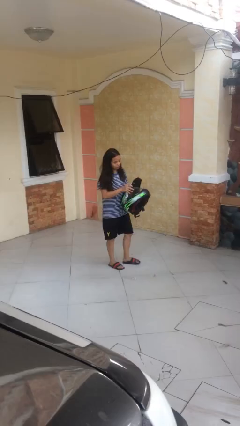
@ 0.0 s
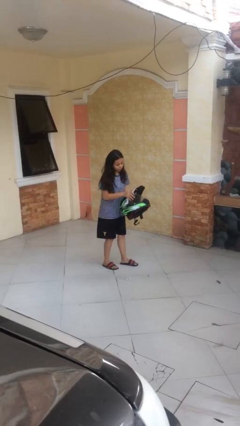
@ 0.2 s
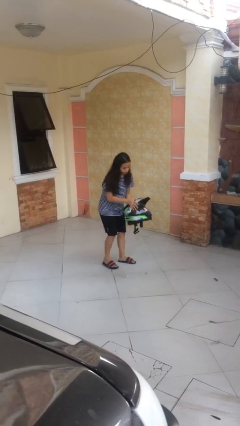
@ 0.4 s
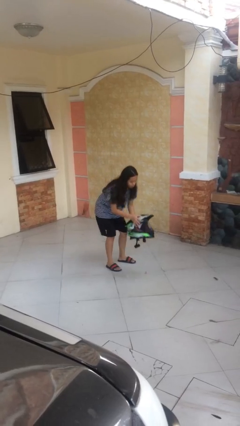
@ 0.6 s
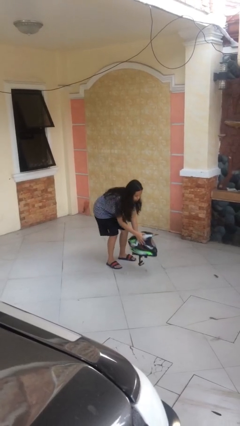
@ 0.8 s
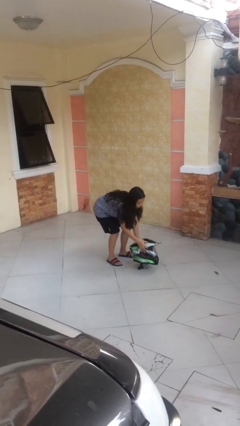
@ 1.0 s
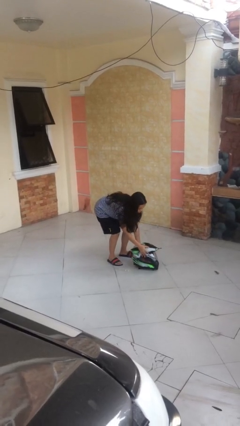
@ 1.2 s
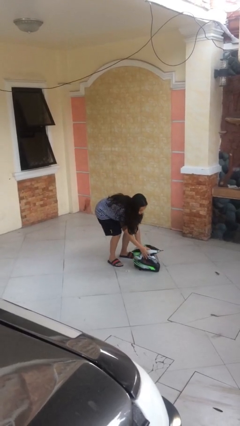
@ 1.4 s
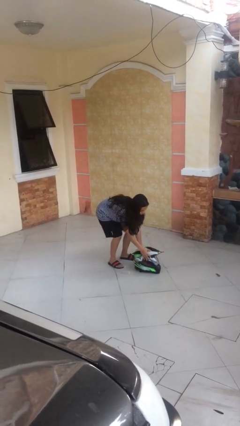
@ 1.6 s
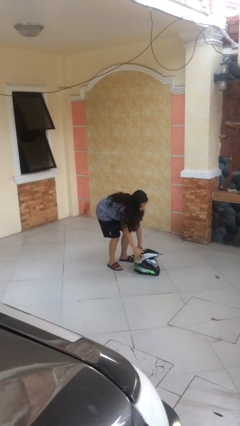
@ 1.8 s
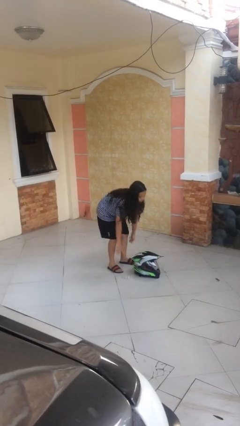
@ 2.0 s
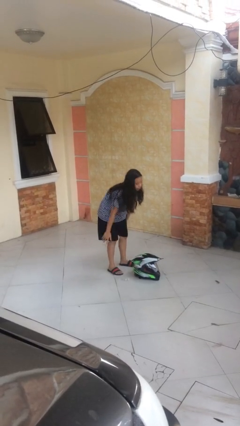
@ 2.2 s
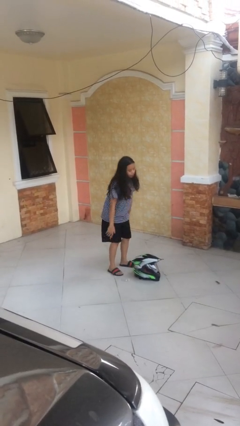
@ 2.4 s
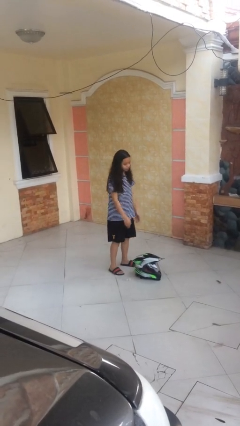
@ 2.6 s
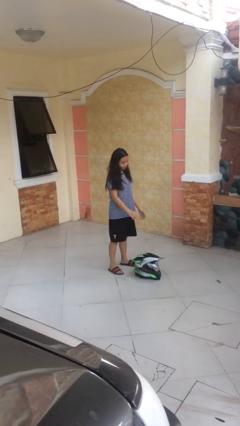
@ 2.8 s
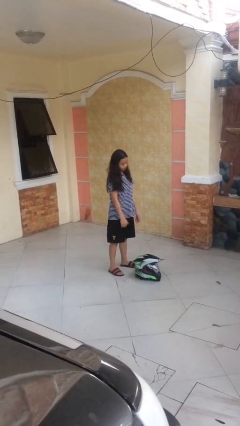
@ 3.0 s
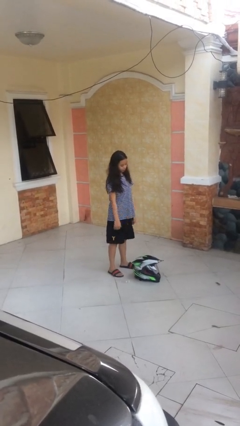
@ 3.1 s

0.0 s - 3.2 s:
person puts down object on floor

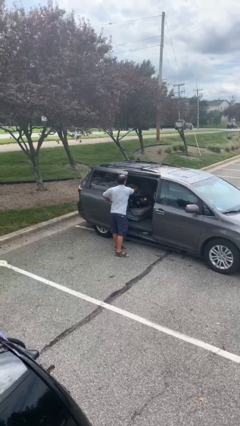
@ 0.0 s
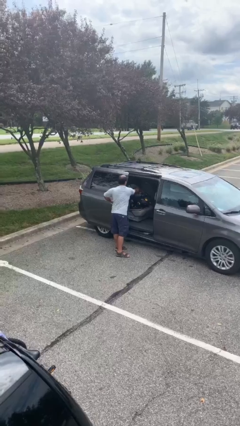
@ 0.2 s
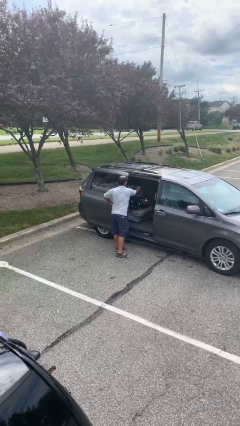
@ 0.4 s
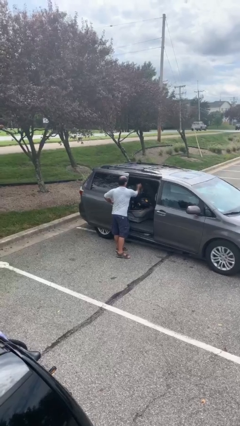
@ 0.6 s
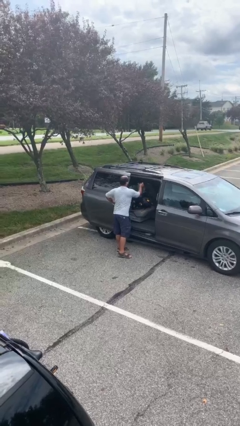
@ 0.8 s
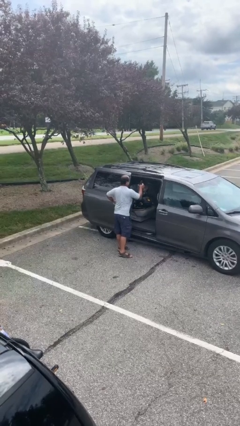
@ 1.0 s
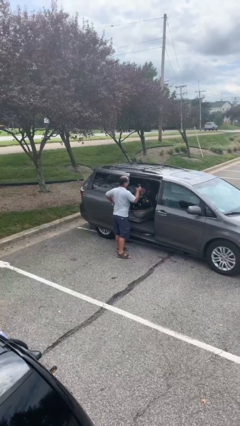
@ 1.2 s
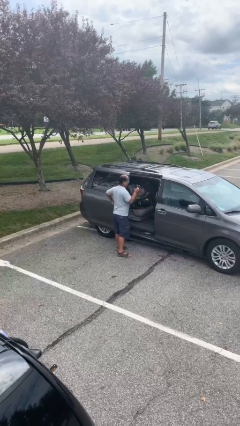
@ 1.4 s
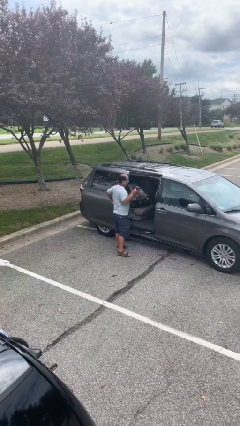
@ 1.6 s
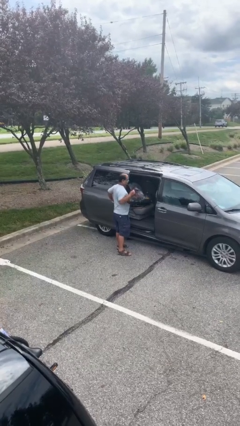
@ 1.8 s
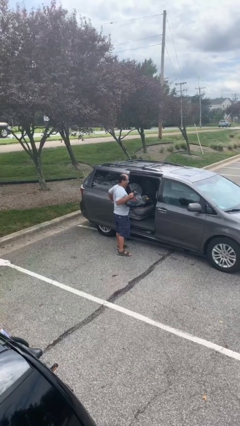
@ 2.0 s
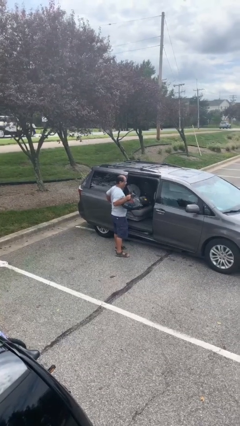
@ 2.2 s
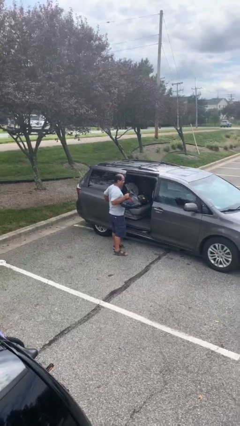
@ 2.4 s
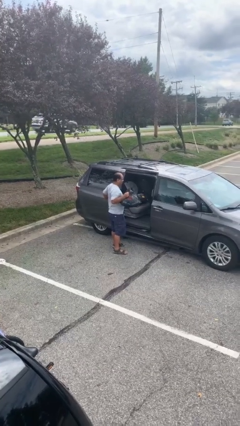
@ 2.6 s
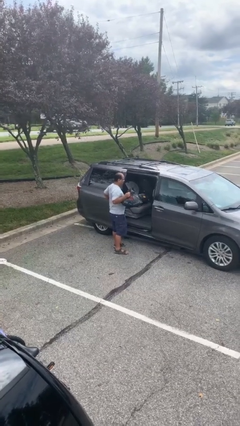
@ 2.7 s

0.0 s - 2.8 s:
person unloads car

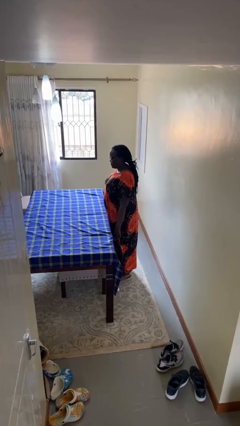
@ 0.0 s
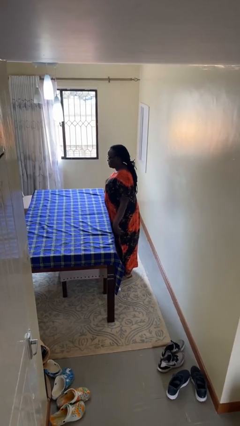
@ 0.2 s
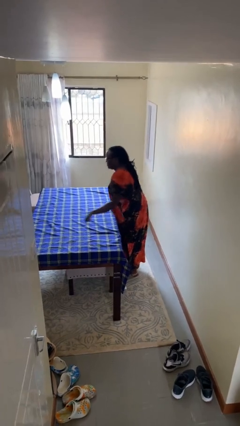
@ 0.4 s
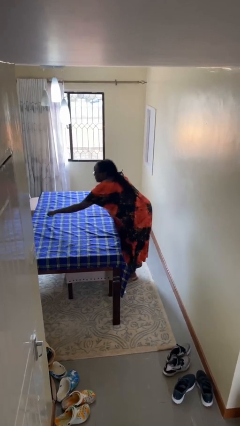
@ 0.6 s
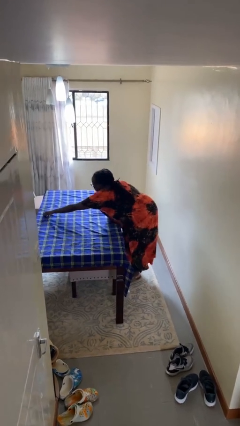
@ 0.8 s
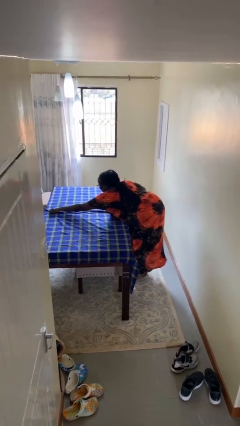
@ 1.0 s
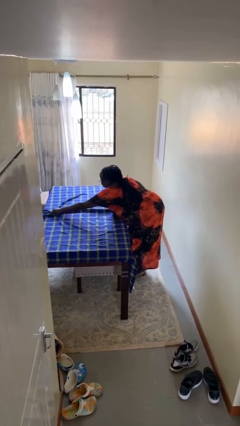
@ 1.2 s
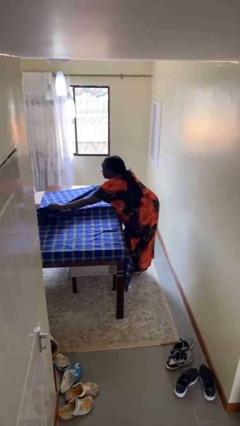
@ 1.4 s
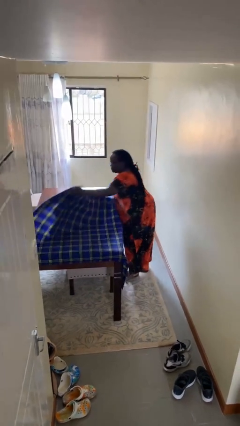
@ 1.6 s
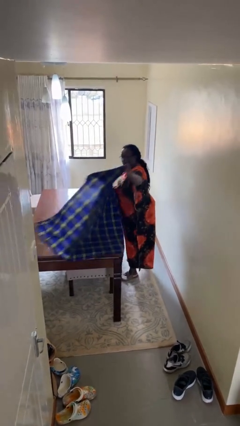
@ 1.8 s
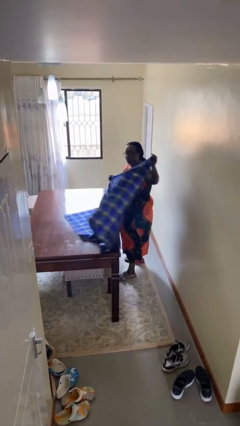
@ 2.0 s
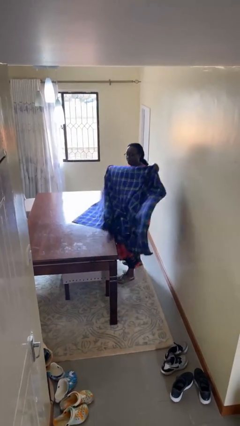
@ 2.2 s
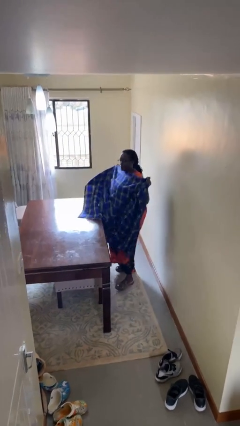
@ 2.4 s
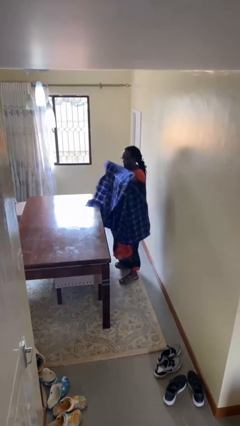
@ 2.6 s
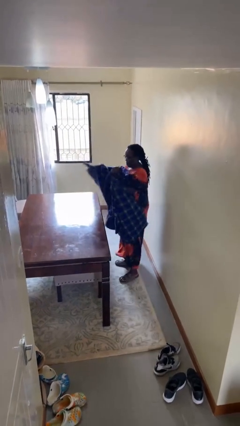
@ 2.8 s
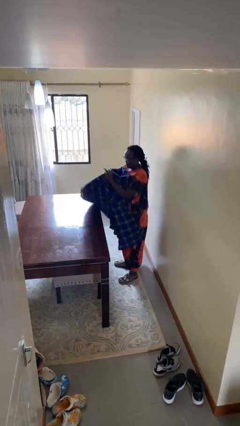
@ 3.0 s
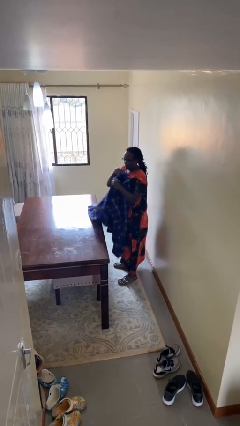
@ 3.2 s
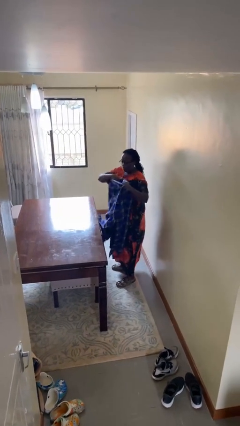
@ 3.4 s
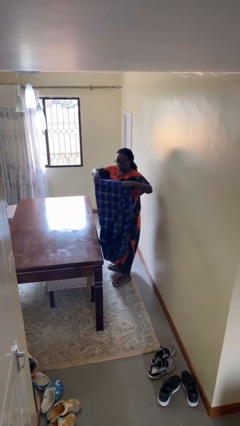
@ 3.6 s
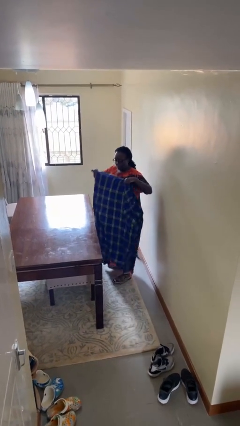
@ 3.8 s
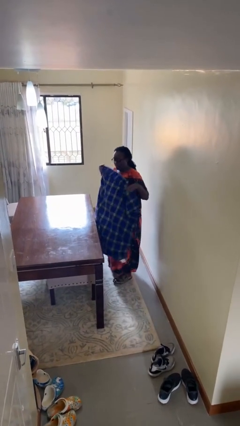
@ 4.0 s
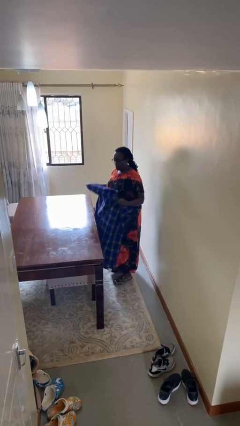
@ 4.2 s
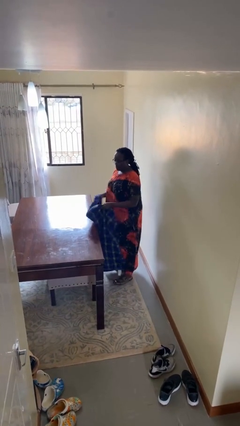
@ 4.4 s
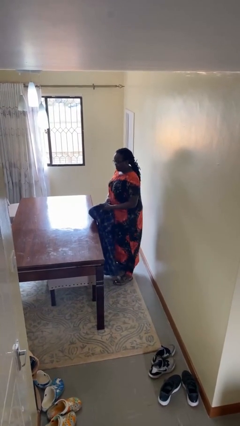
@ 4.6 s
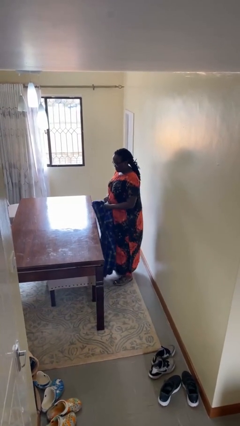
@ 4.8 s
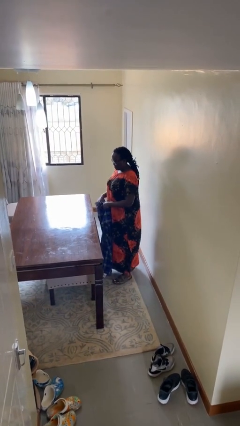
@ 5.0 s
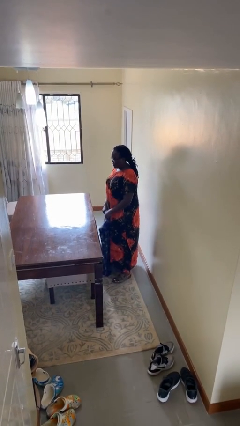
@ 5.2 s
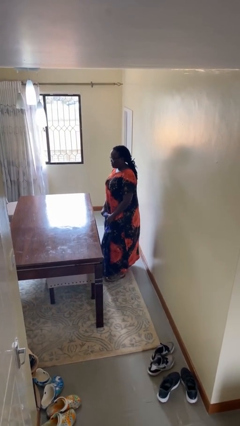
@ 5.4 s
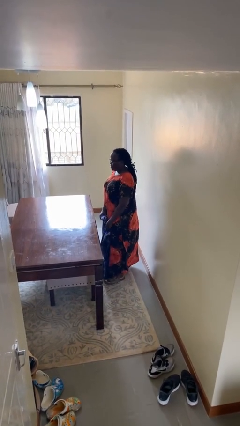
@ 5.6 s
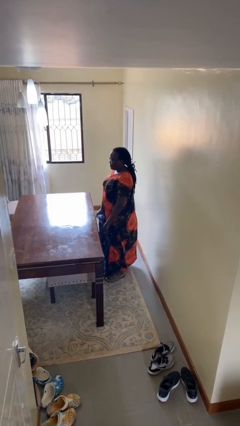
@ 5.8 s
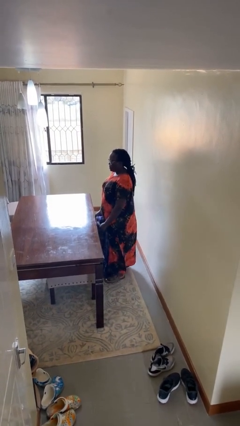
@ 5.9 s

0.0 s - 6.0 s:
person folds tablecloth

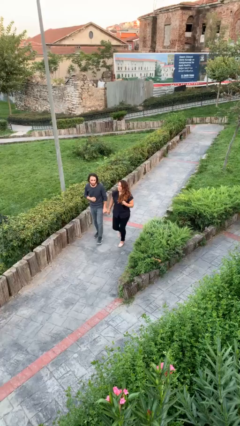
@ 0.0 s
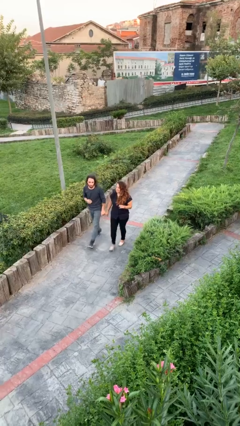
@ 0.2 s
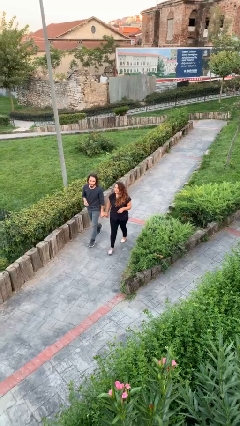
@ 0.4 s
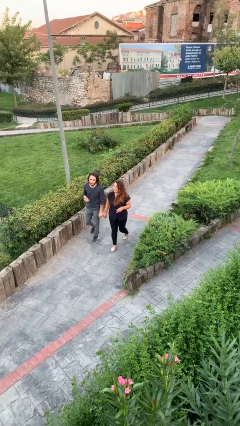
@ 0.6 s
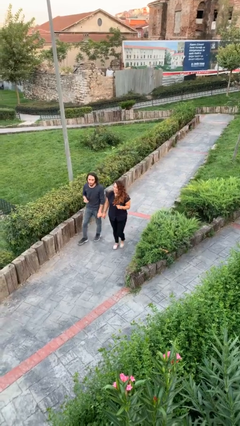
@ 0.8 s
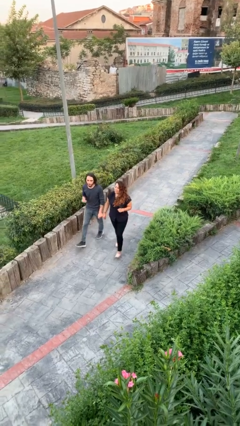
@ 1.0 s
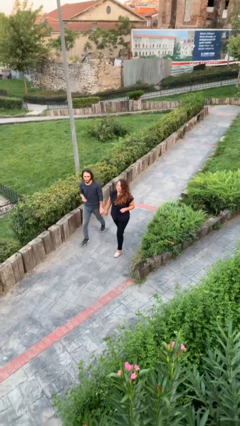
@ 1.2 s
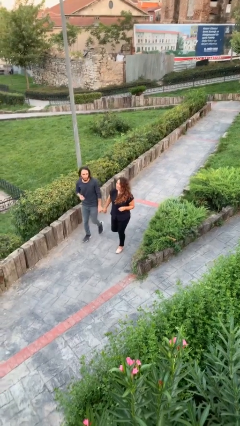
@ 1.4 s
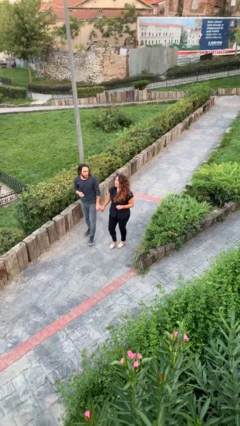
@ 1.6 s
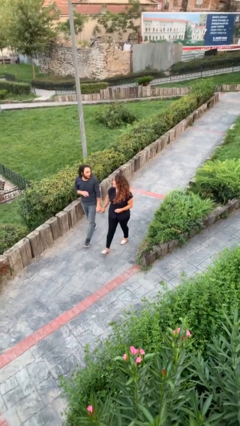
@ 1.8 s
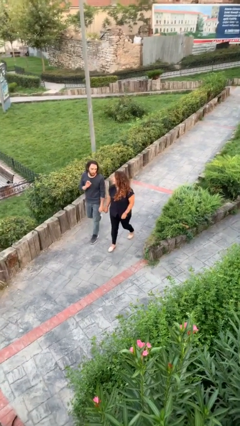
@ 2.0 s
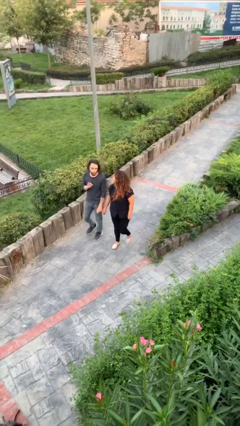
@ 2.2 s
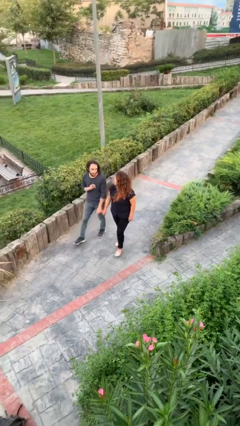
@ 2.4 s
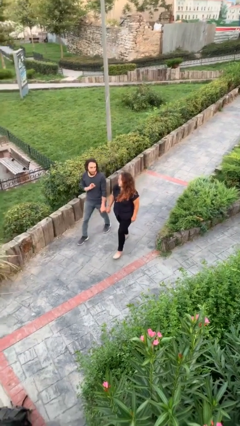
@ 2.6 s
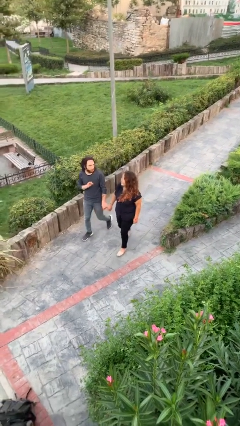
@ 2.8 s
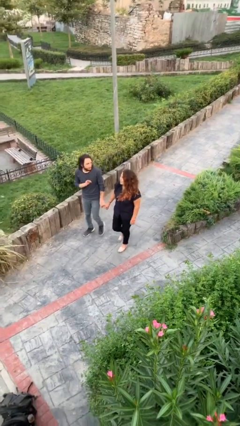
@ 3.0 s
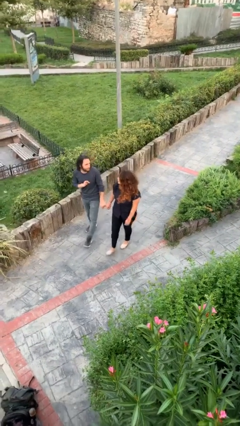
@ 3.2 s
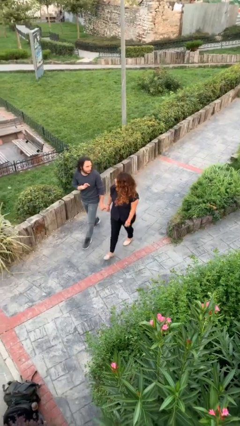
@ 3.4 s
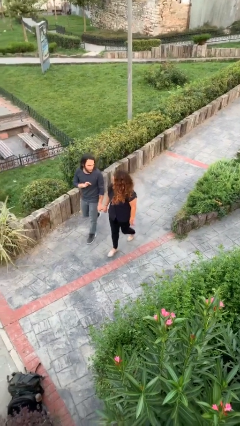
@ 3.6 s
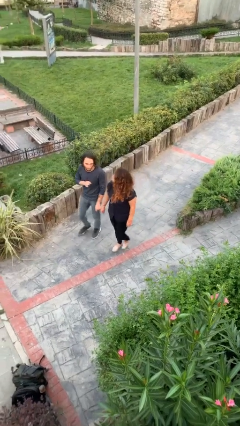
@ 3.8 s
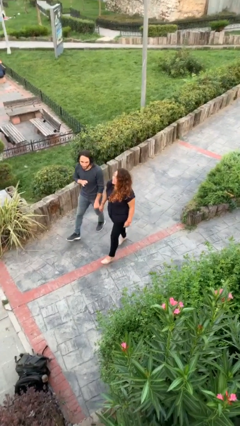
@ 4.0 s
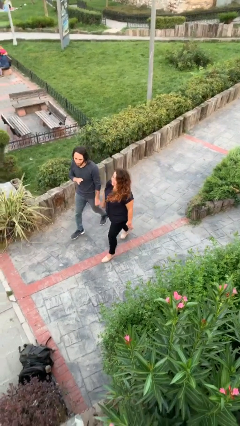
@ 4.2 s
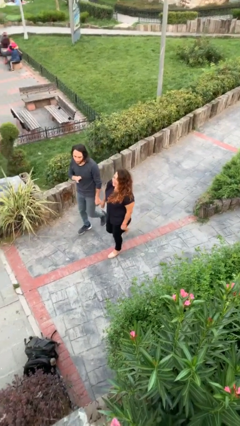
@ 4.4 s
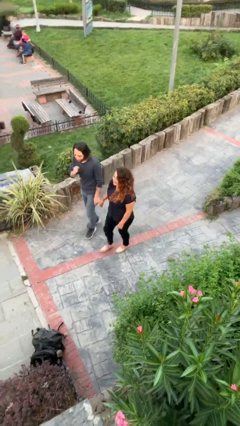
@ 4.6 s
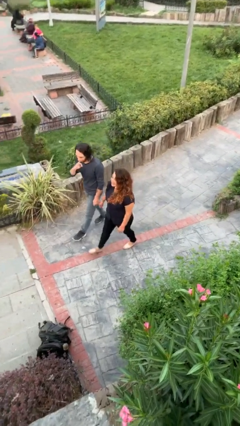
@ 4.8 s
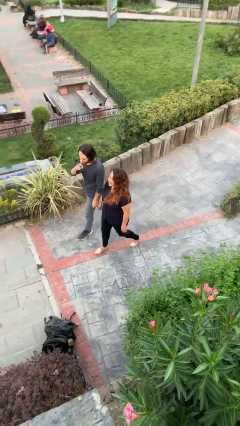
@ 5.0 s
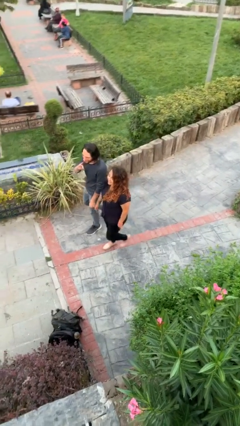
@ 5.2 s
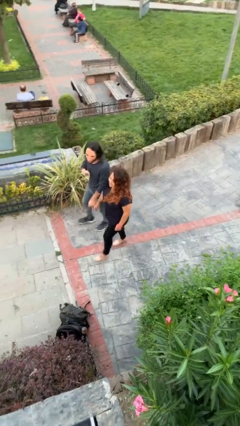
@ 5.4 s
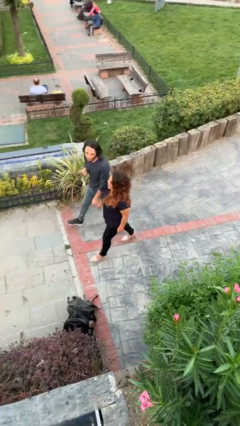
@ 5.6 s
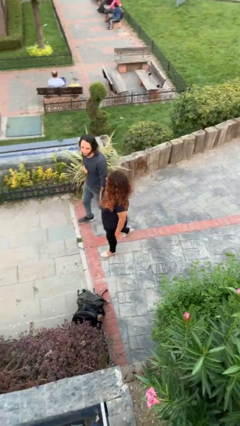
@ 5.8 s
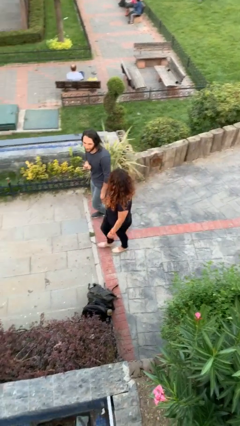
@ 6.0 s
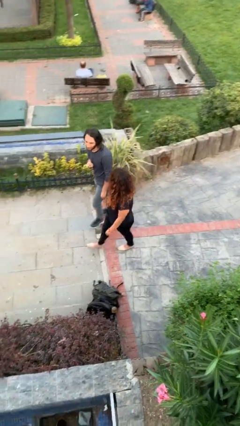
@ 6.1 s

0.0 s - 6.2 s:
person holds hand
